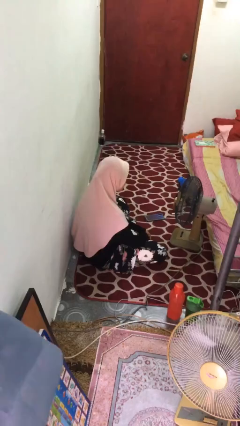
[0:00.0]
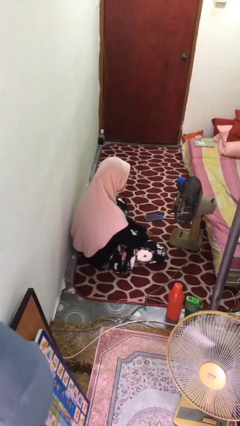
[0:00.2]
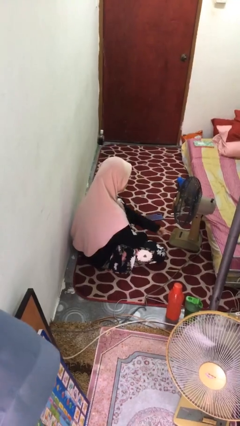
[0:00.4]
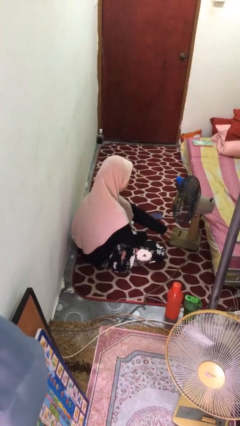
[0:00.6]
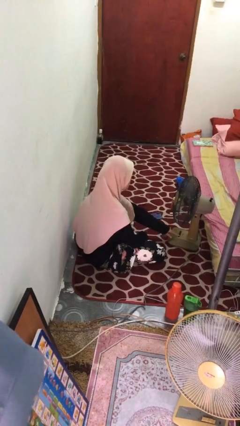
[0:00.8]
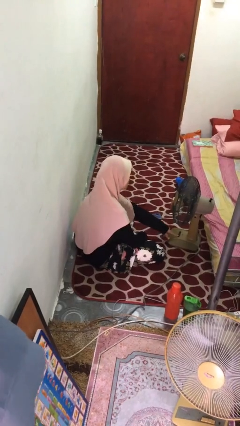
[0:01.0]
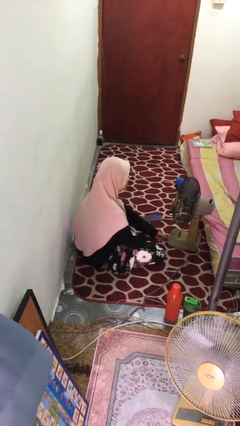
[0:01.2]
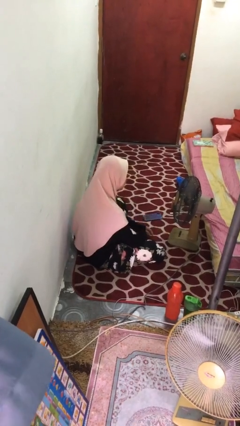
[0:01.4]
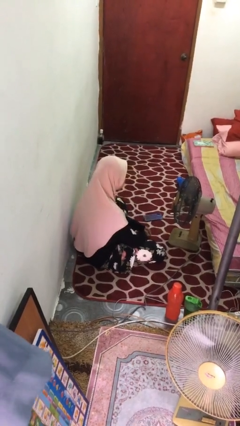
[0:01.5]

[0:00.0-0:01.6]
person turns off fan

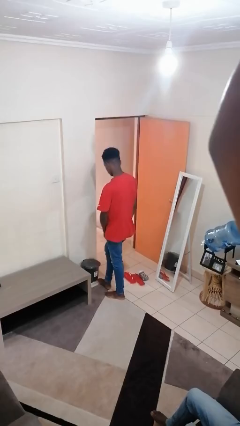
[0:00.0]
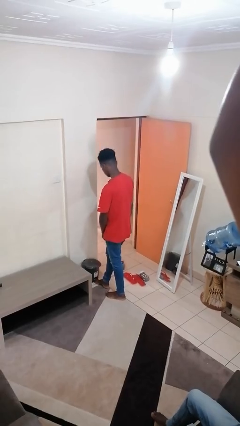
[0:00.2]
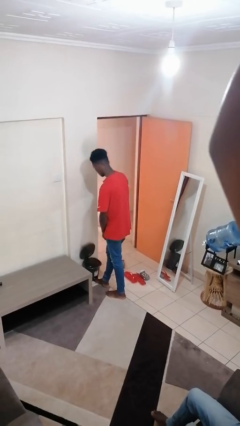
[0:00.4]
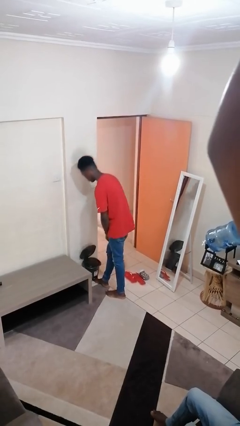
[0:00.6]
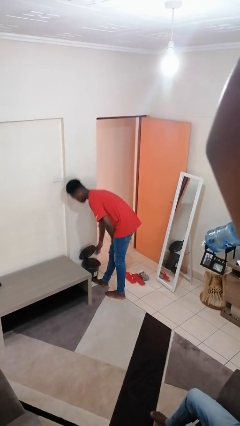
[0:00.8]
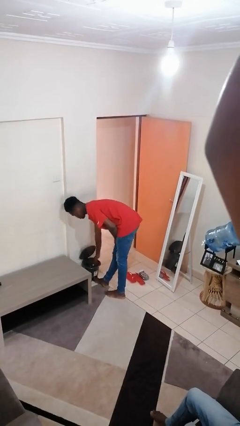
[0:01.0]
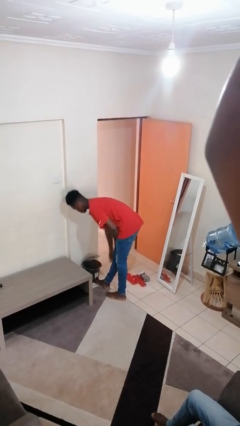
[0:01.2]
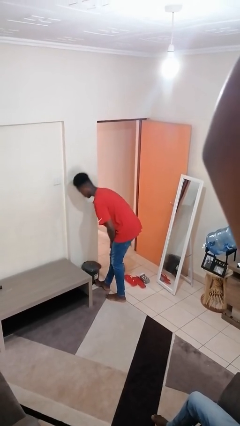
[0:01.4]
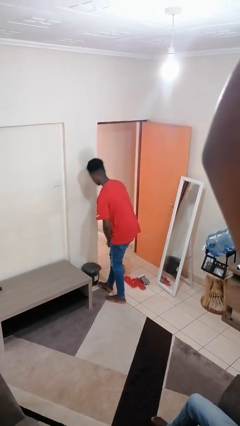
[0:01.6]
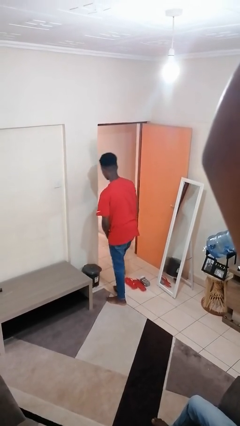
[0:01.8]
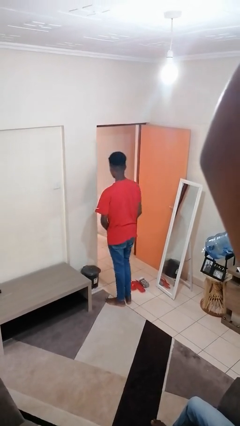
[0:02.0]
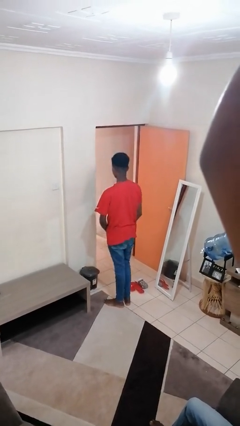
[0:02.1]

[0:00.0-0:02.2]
person discards trash

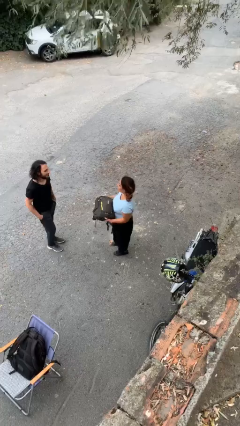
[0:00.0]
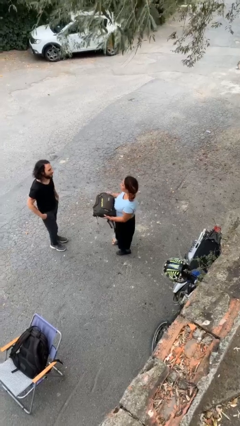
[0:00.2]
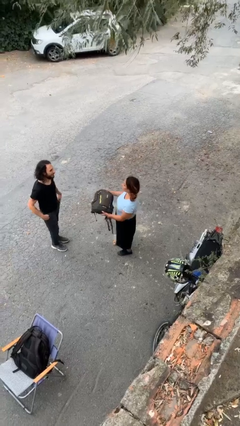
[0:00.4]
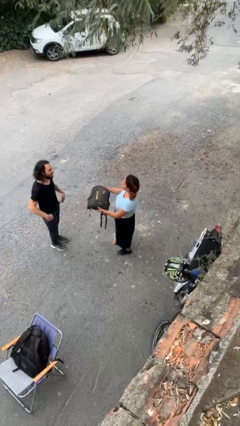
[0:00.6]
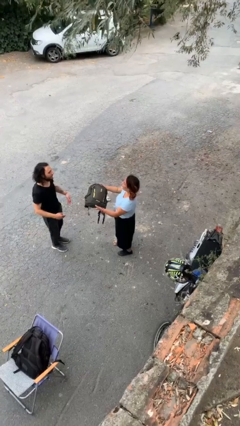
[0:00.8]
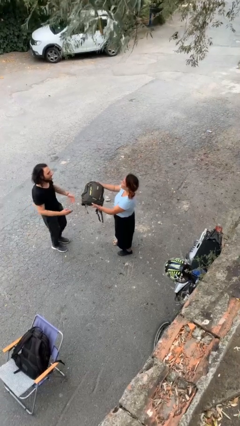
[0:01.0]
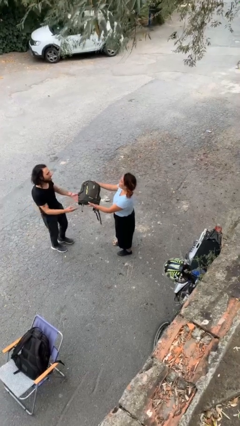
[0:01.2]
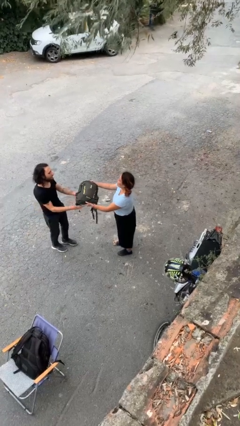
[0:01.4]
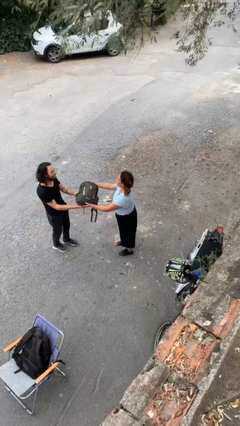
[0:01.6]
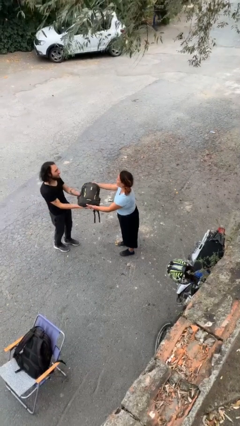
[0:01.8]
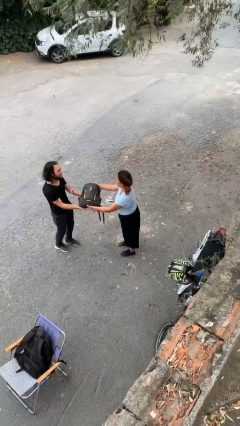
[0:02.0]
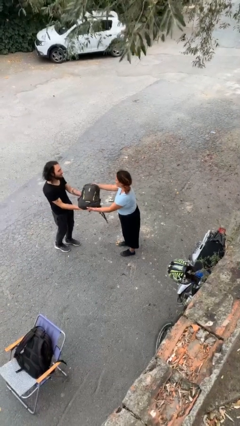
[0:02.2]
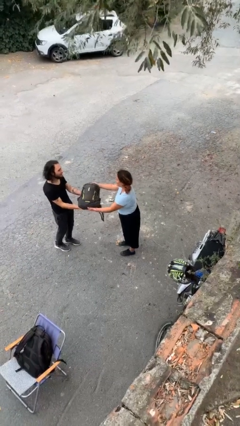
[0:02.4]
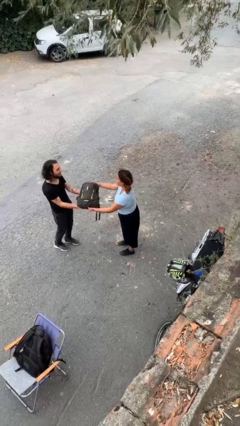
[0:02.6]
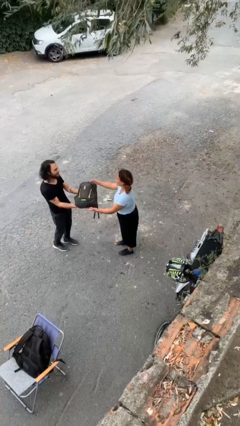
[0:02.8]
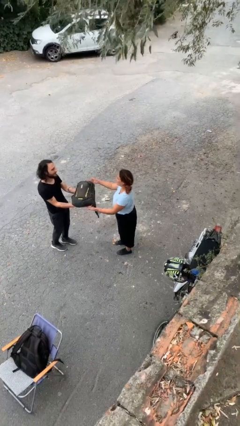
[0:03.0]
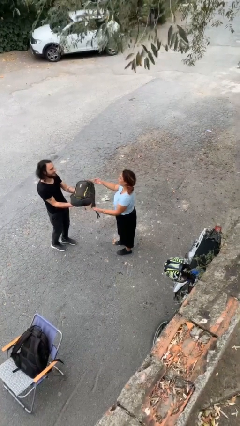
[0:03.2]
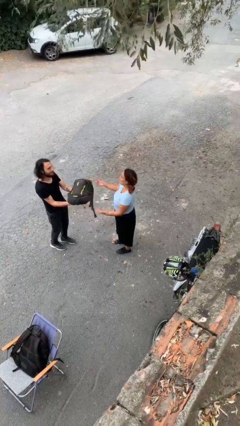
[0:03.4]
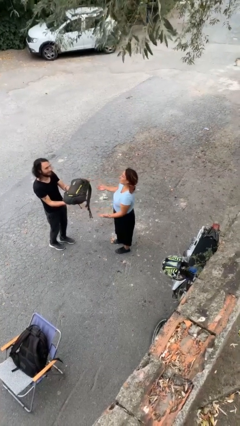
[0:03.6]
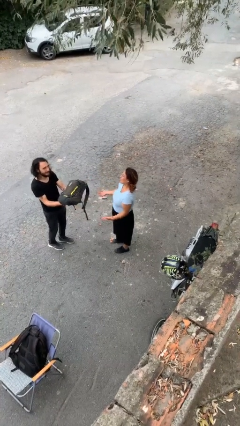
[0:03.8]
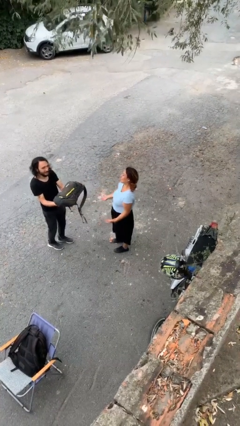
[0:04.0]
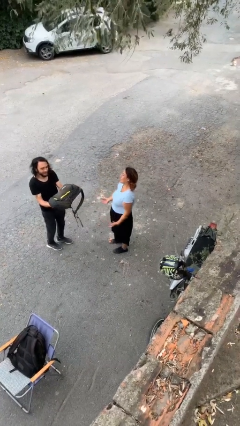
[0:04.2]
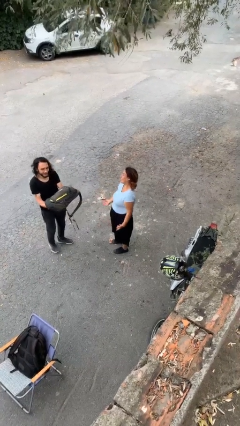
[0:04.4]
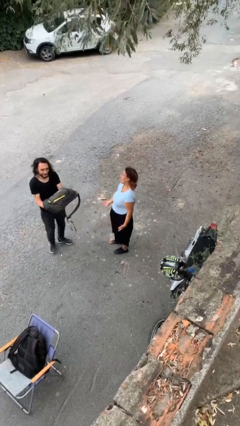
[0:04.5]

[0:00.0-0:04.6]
person transfers object to person

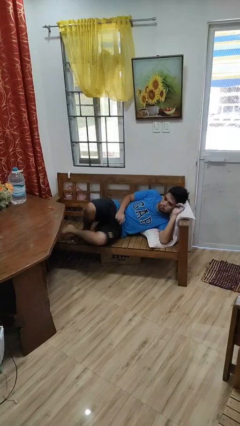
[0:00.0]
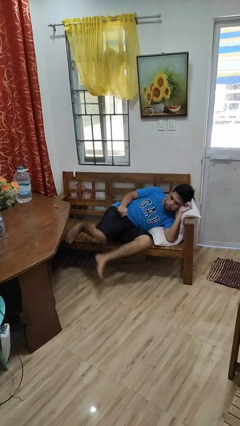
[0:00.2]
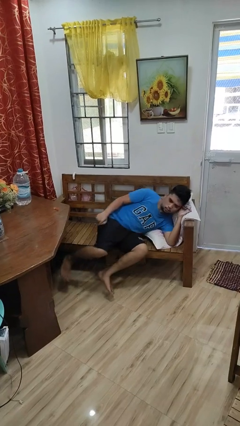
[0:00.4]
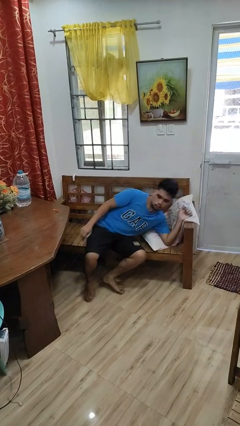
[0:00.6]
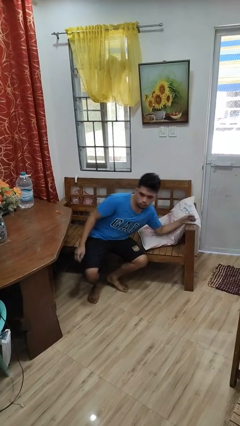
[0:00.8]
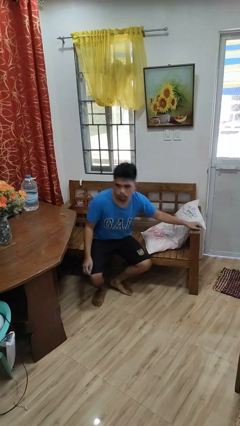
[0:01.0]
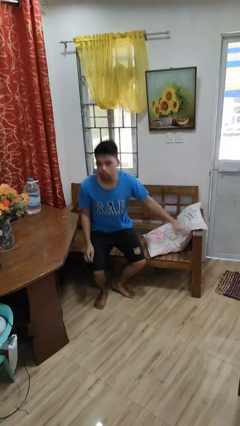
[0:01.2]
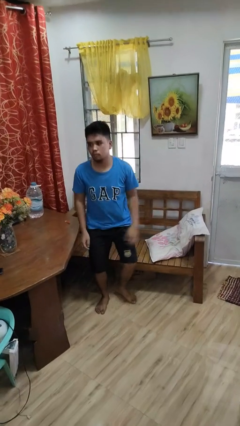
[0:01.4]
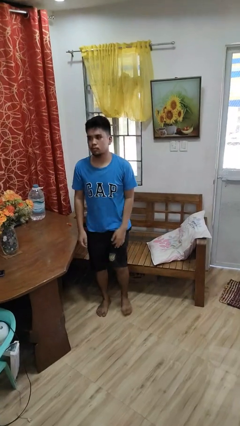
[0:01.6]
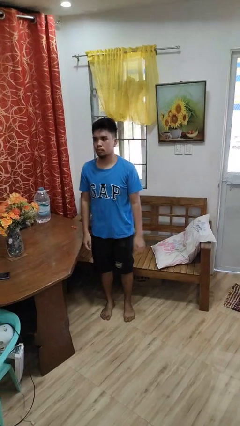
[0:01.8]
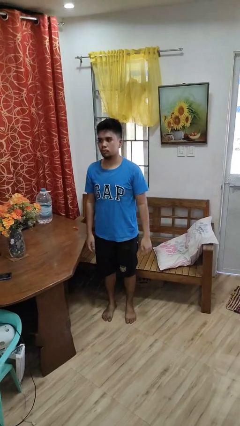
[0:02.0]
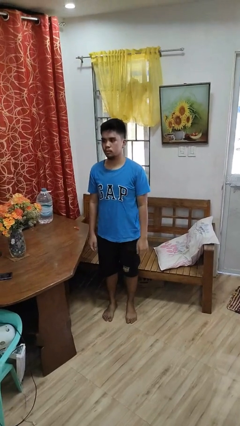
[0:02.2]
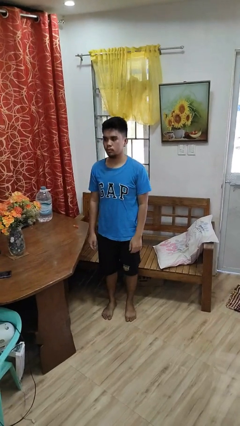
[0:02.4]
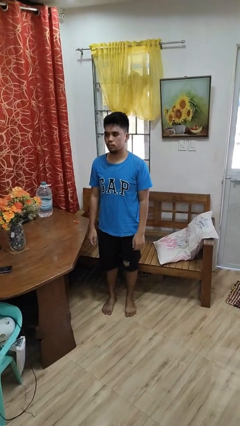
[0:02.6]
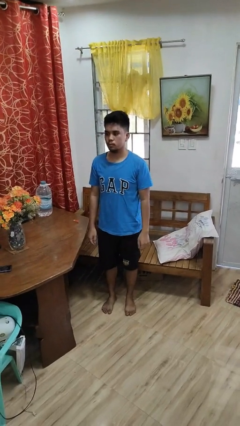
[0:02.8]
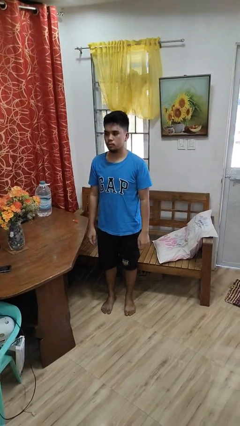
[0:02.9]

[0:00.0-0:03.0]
person stands up

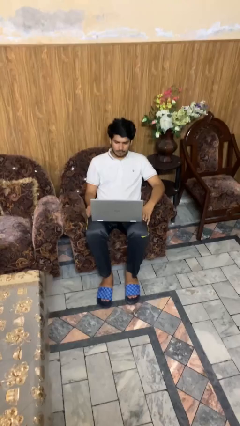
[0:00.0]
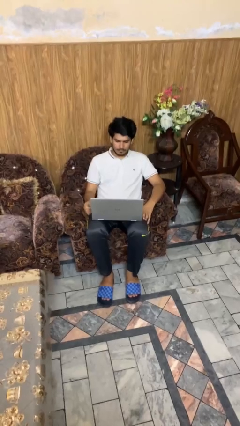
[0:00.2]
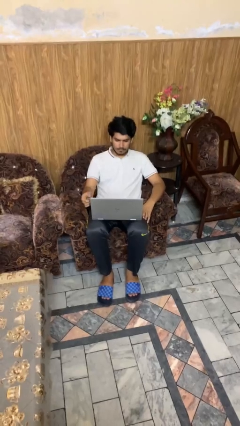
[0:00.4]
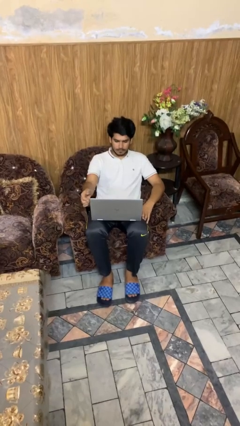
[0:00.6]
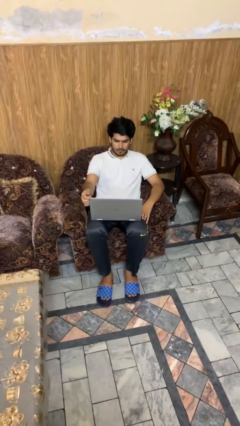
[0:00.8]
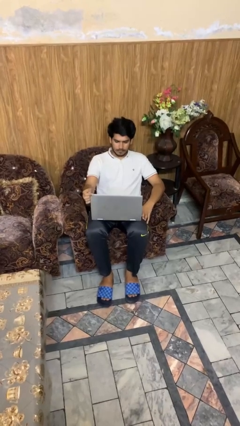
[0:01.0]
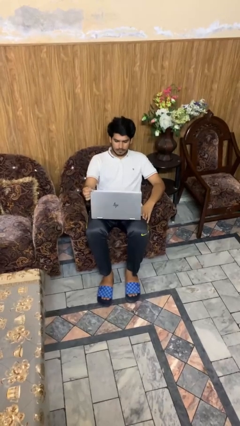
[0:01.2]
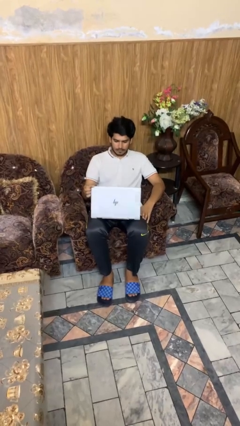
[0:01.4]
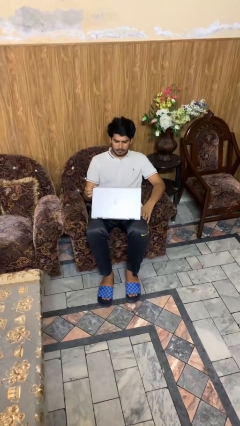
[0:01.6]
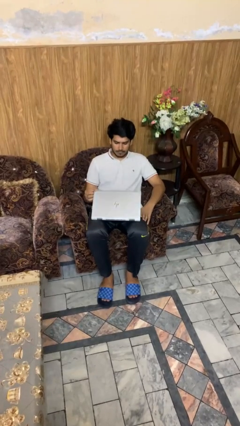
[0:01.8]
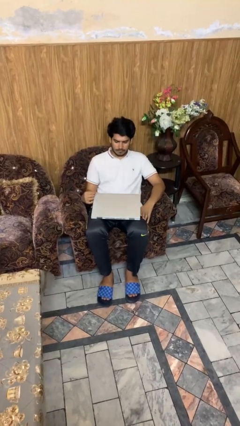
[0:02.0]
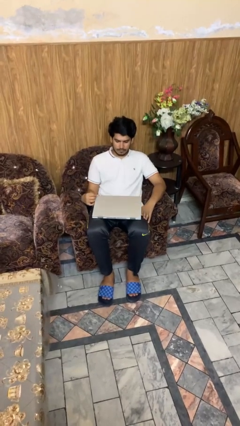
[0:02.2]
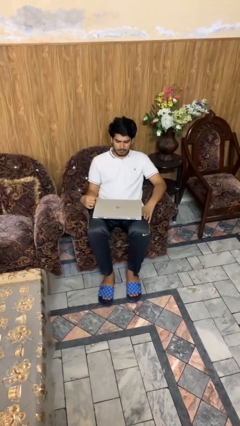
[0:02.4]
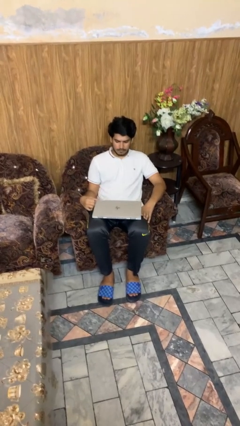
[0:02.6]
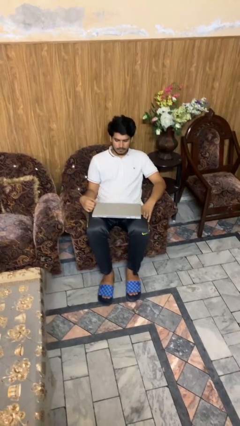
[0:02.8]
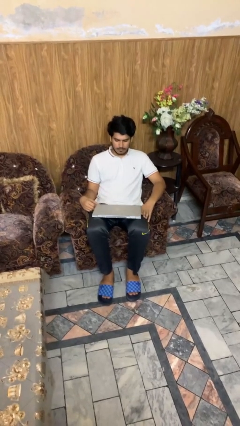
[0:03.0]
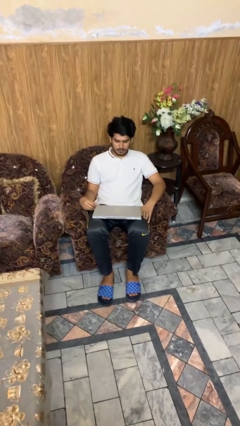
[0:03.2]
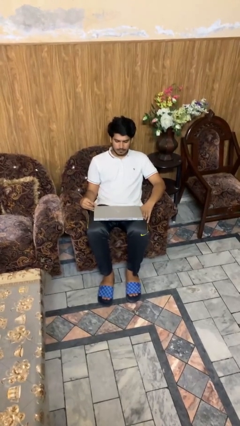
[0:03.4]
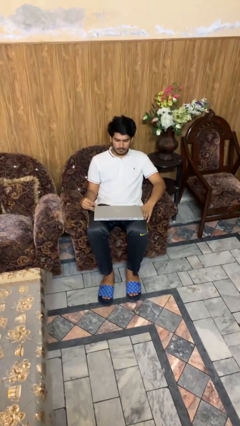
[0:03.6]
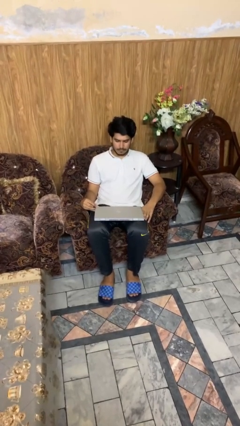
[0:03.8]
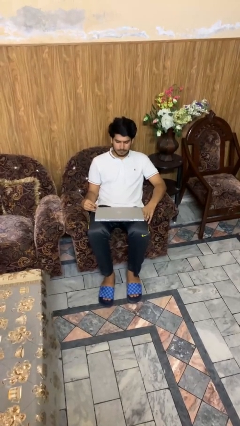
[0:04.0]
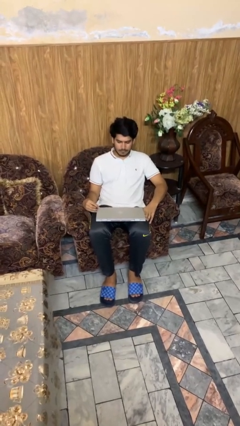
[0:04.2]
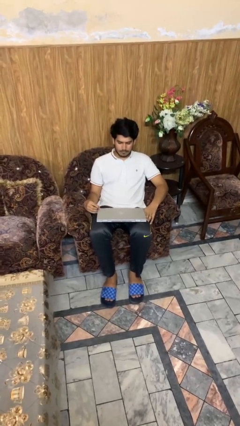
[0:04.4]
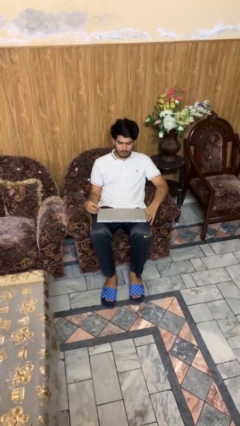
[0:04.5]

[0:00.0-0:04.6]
person closes laptop

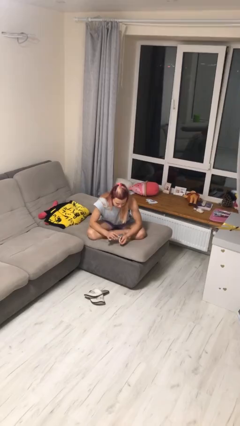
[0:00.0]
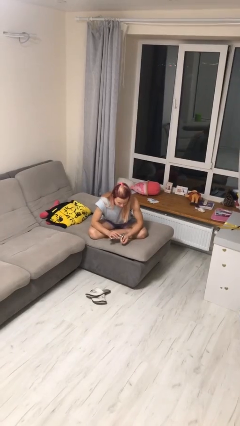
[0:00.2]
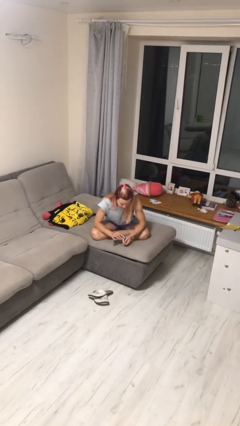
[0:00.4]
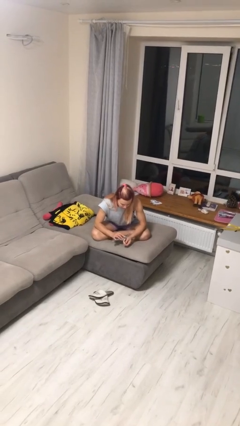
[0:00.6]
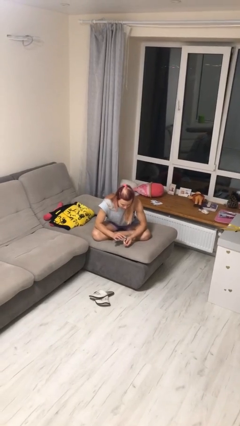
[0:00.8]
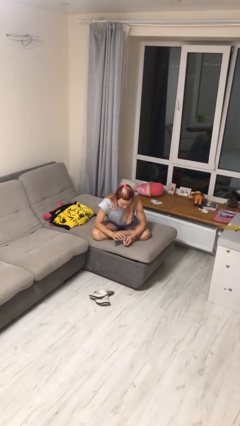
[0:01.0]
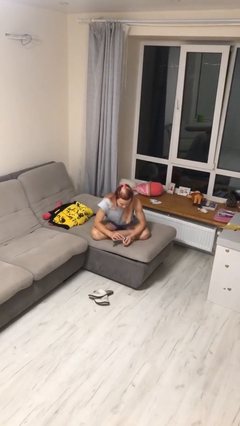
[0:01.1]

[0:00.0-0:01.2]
person files fingernails

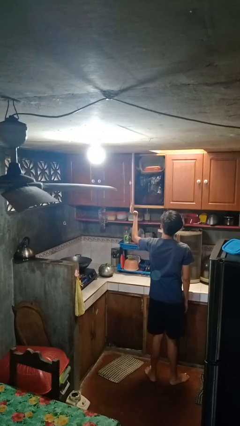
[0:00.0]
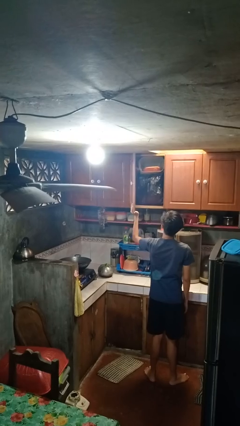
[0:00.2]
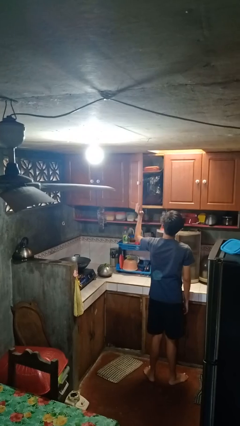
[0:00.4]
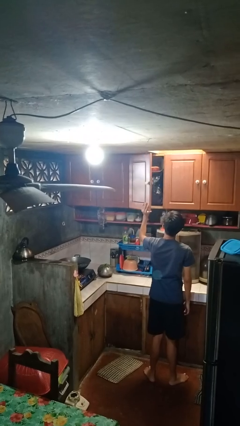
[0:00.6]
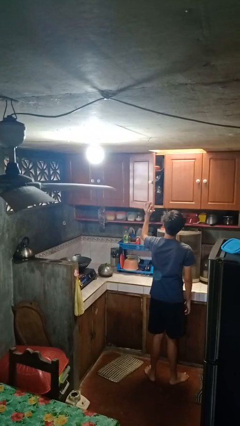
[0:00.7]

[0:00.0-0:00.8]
person closes cabinet
